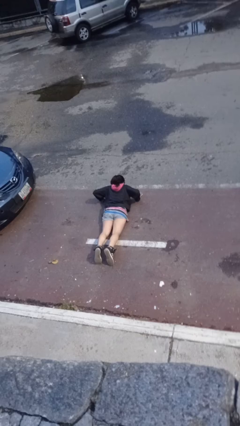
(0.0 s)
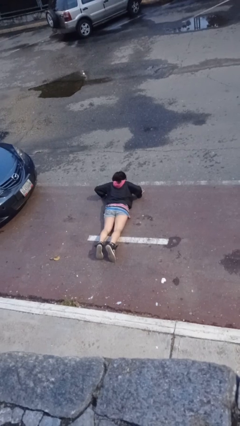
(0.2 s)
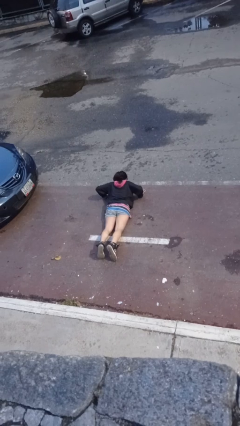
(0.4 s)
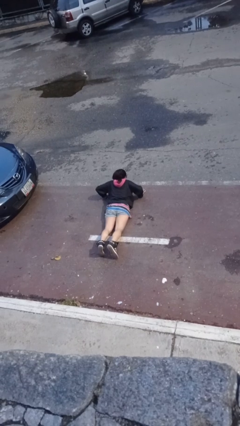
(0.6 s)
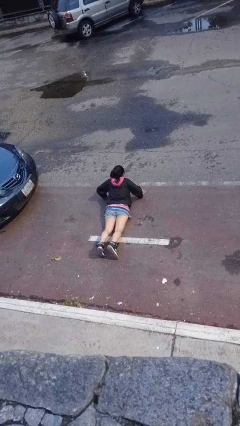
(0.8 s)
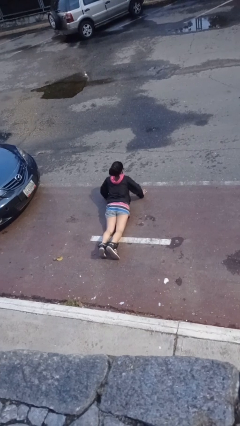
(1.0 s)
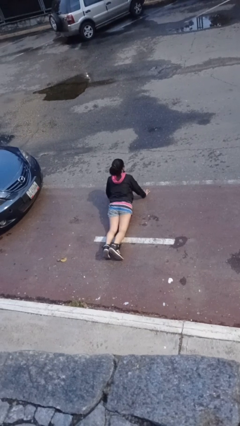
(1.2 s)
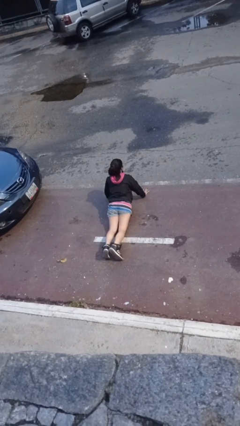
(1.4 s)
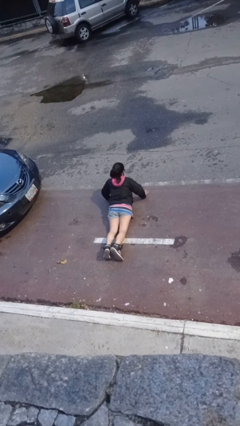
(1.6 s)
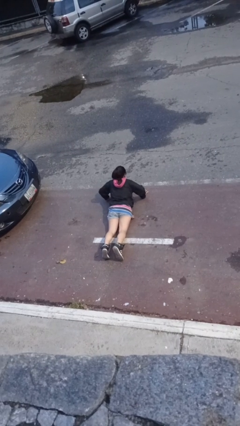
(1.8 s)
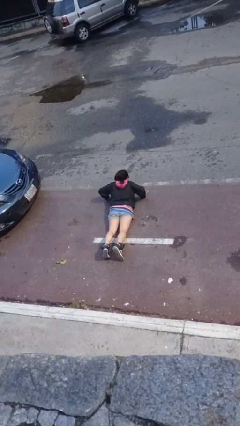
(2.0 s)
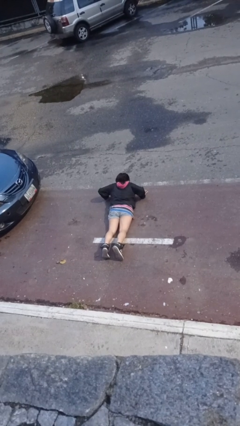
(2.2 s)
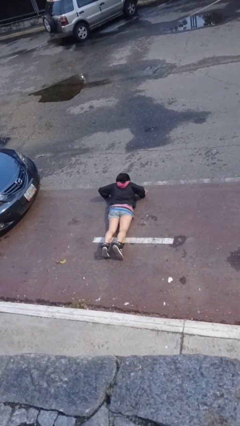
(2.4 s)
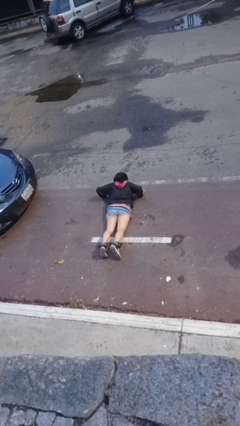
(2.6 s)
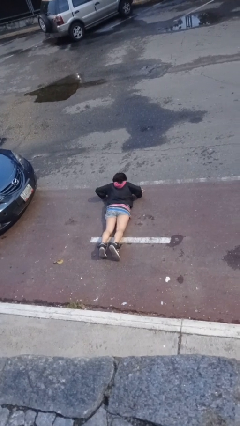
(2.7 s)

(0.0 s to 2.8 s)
person exercises with pushup

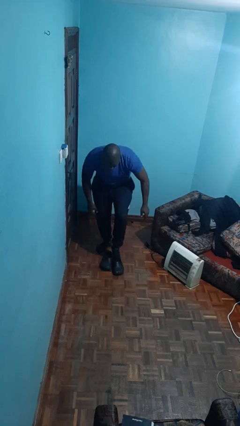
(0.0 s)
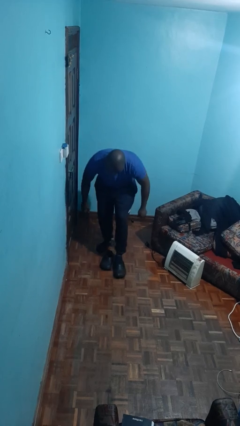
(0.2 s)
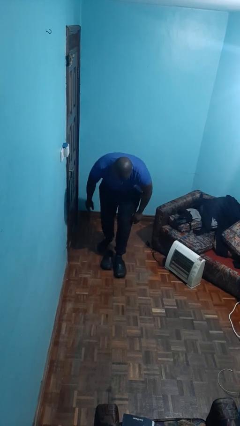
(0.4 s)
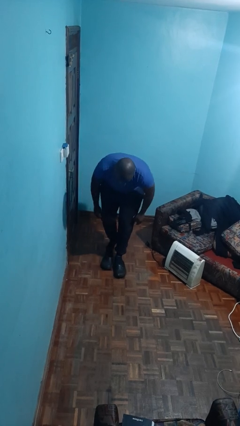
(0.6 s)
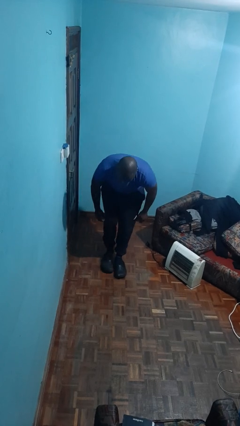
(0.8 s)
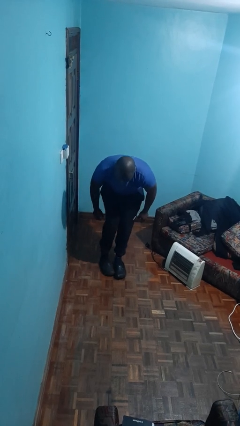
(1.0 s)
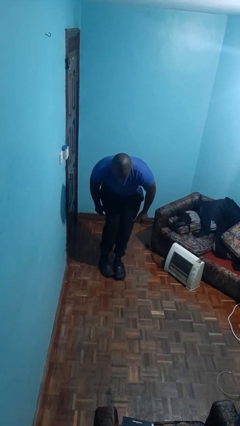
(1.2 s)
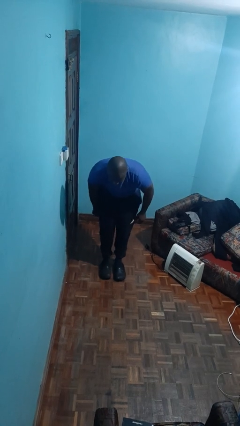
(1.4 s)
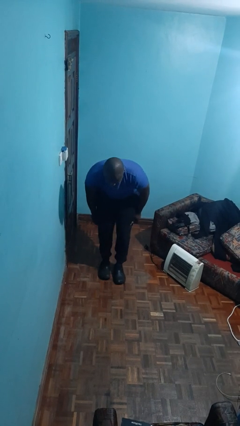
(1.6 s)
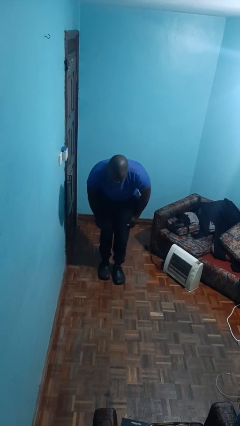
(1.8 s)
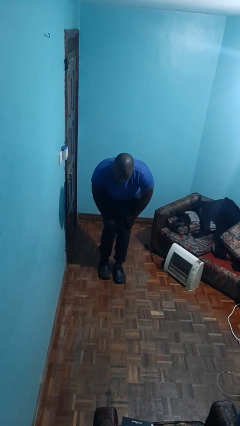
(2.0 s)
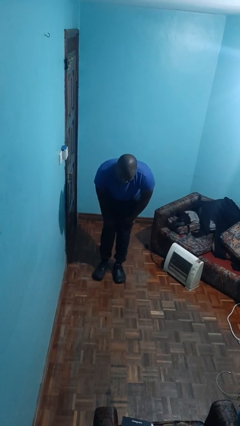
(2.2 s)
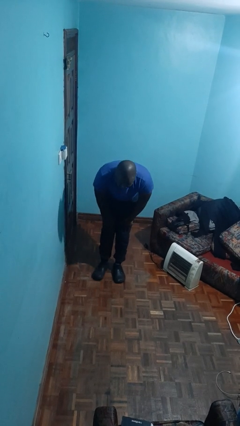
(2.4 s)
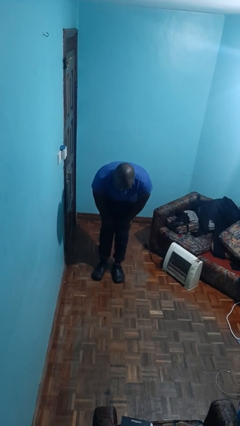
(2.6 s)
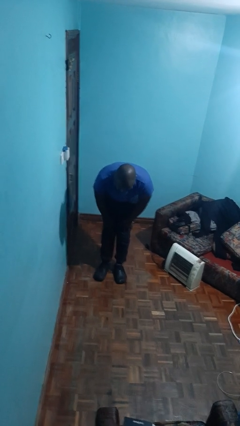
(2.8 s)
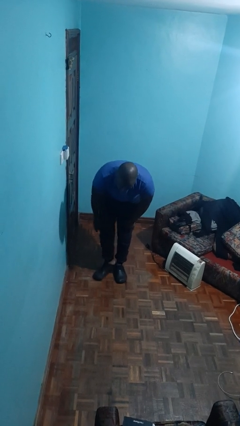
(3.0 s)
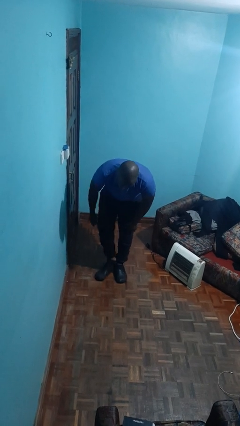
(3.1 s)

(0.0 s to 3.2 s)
person puts on shoes

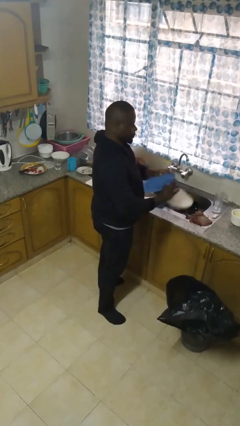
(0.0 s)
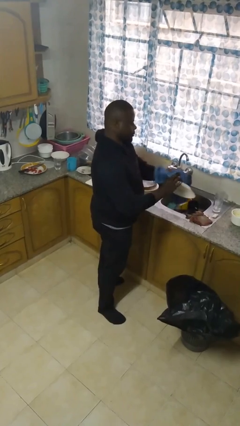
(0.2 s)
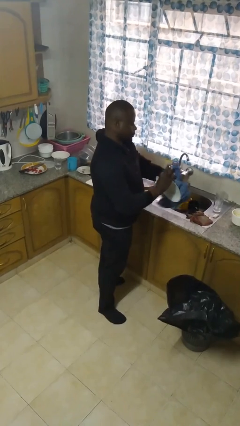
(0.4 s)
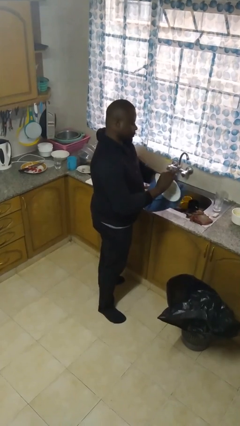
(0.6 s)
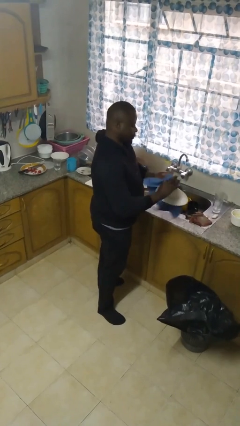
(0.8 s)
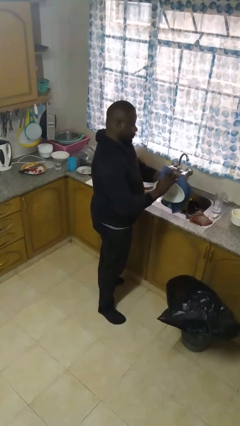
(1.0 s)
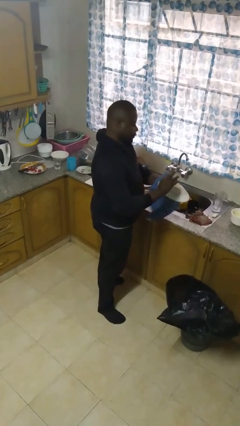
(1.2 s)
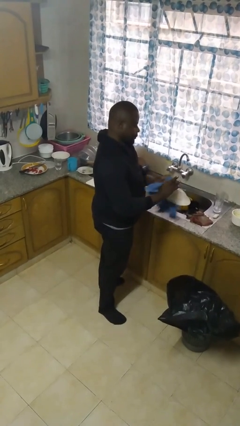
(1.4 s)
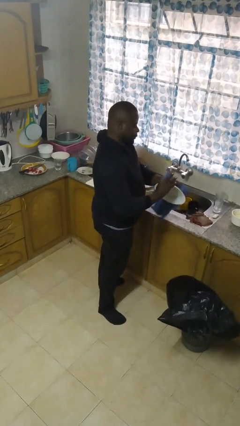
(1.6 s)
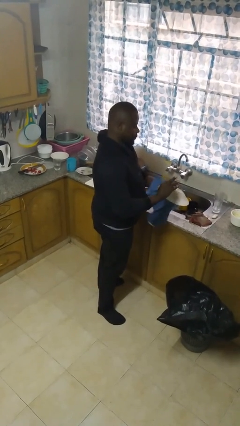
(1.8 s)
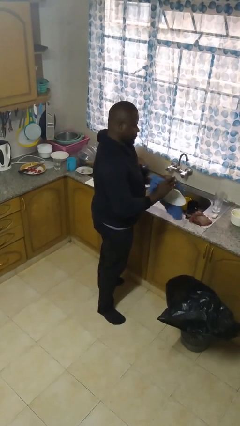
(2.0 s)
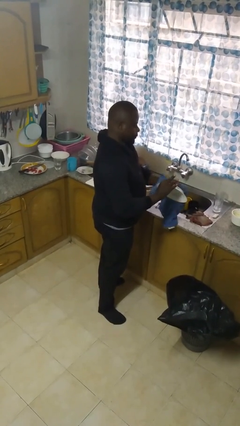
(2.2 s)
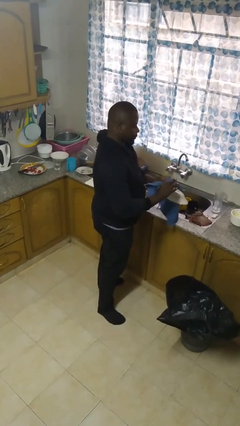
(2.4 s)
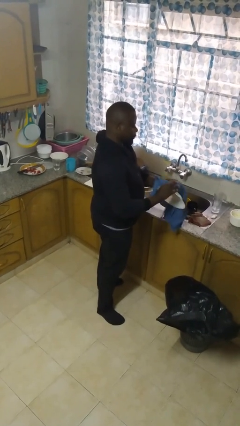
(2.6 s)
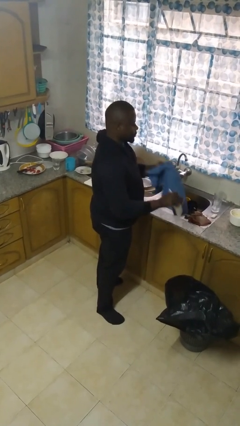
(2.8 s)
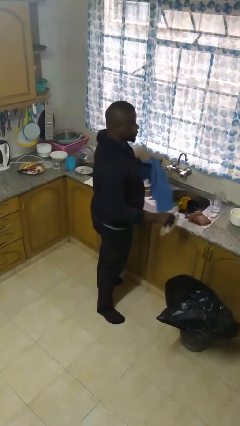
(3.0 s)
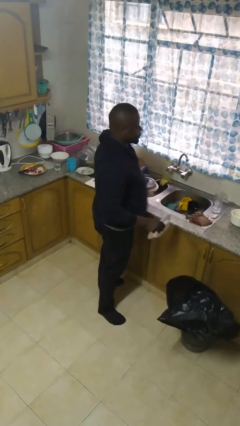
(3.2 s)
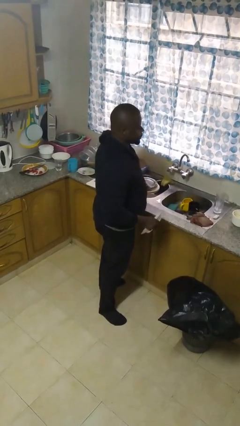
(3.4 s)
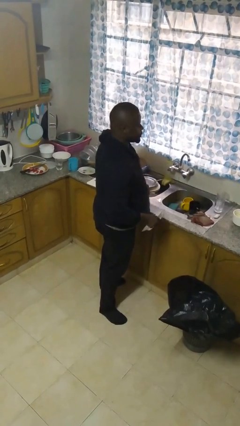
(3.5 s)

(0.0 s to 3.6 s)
person dries dish

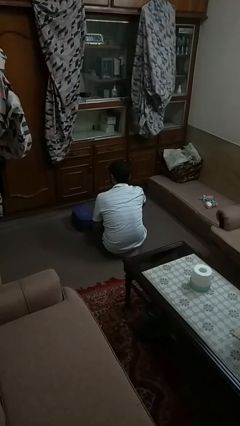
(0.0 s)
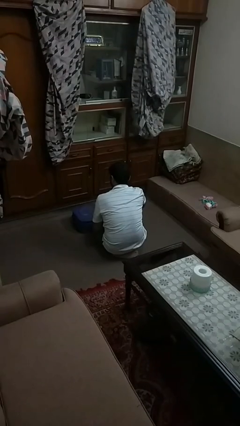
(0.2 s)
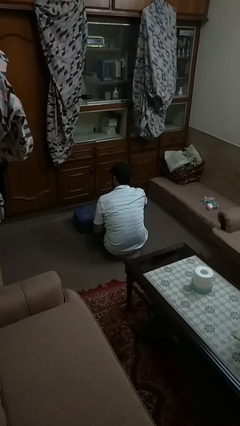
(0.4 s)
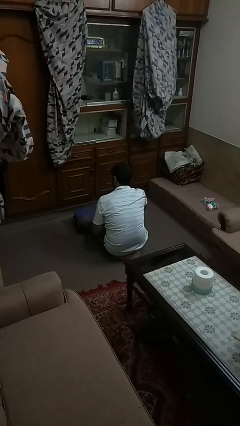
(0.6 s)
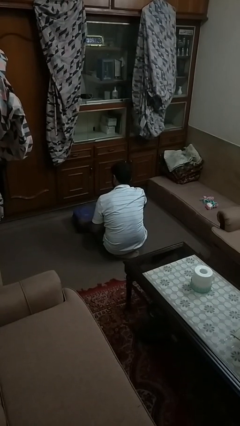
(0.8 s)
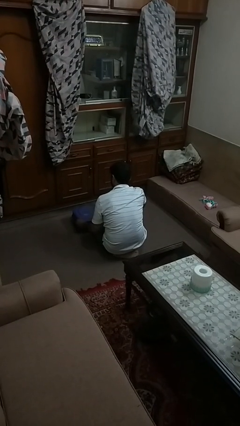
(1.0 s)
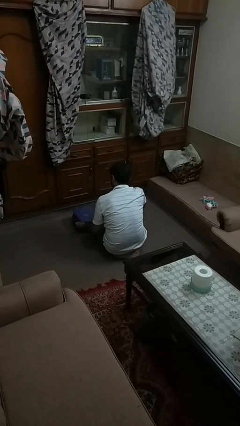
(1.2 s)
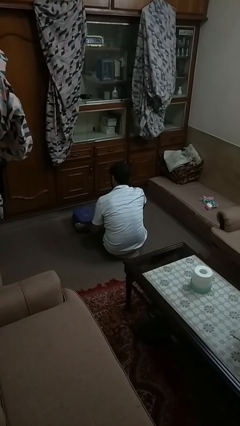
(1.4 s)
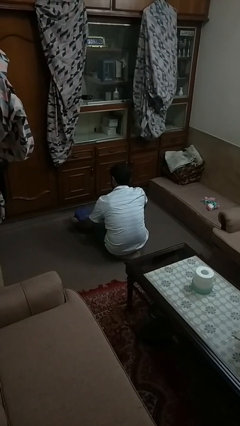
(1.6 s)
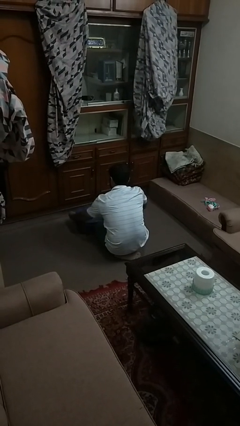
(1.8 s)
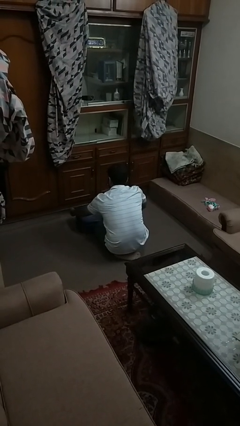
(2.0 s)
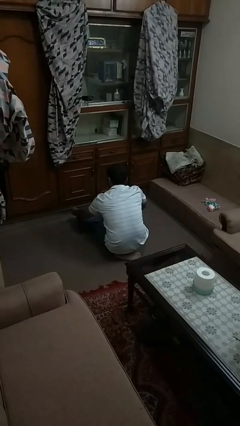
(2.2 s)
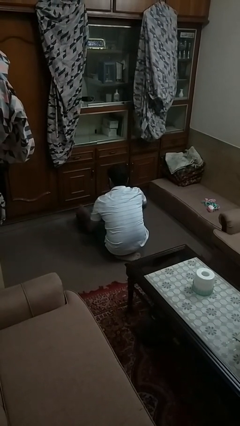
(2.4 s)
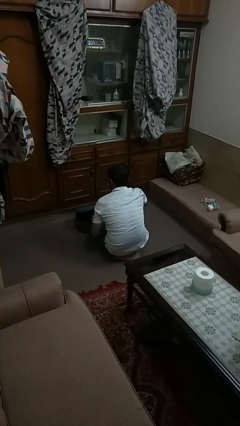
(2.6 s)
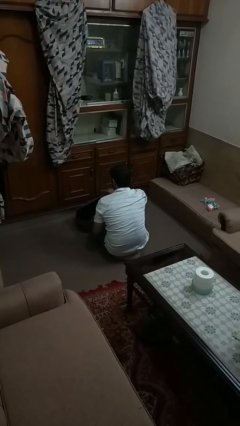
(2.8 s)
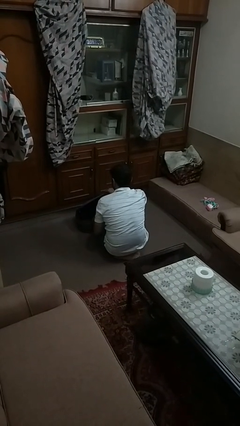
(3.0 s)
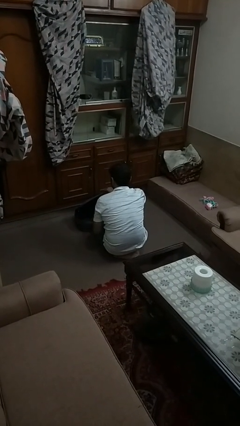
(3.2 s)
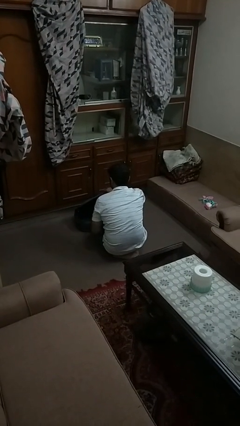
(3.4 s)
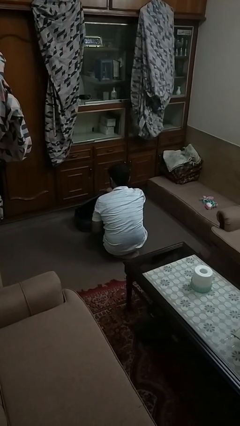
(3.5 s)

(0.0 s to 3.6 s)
person opens suitcase

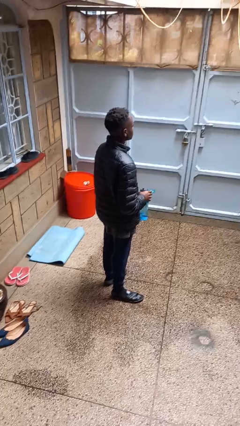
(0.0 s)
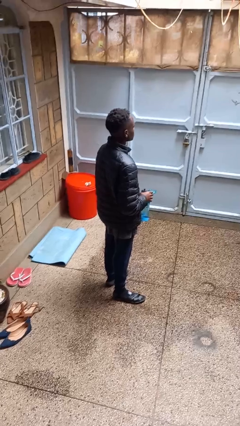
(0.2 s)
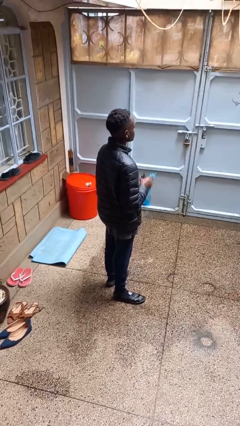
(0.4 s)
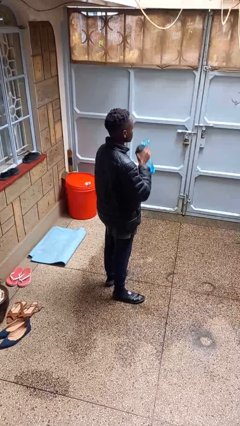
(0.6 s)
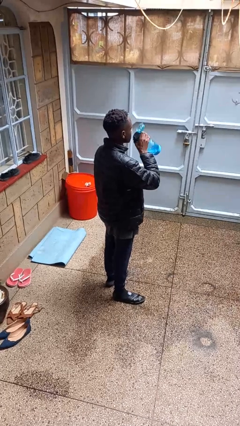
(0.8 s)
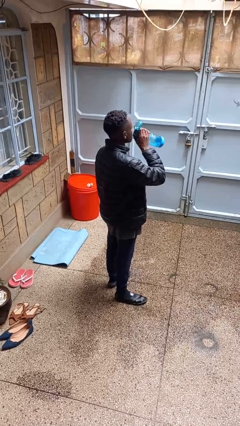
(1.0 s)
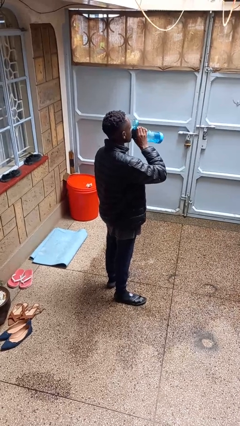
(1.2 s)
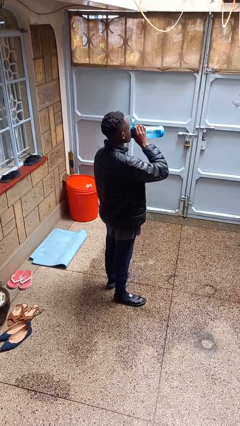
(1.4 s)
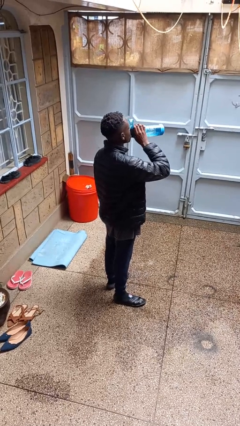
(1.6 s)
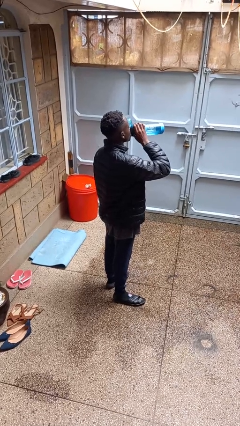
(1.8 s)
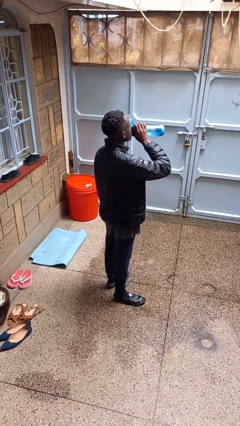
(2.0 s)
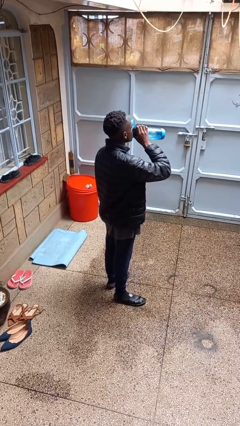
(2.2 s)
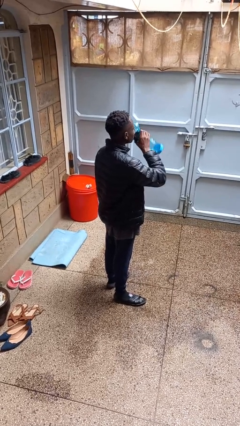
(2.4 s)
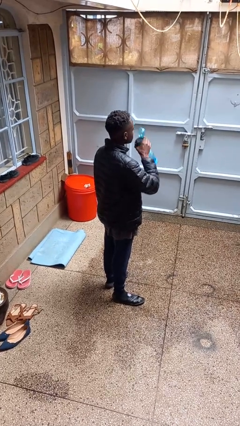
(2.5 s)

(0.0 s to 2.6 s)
person drinks from bottle

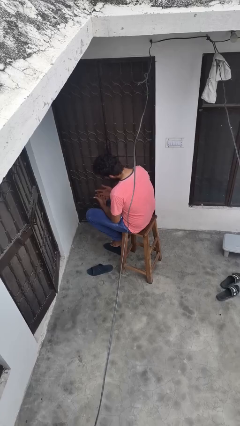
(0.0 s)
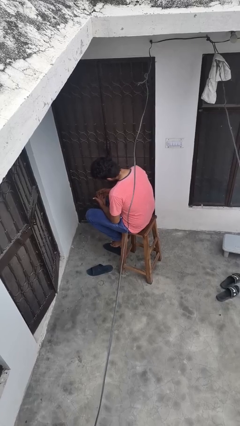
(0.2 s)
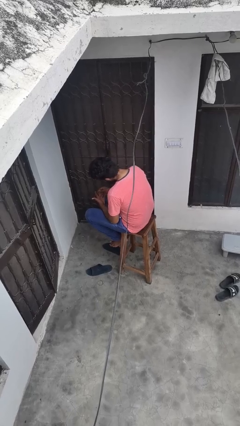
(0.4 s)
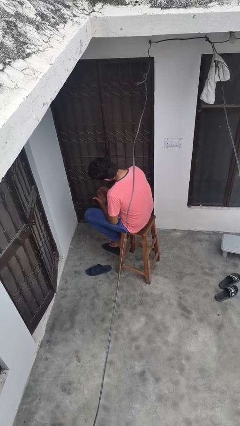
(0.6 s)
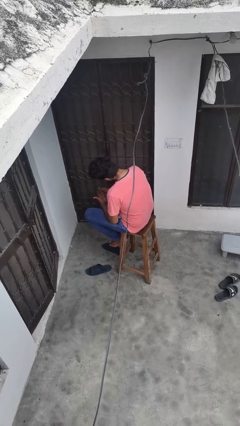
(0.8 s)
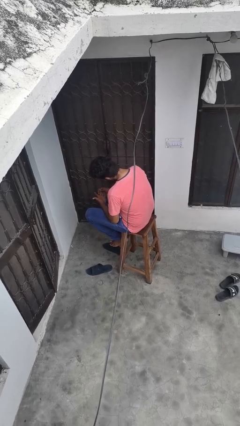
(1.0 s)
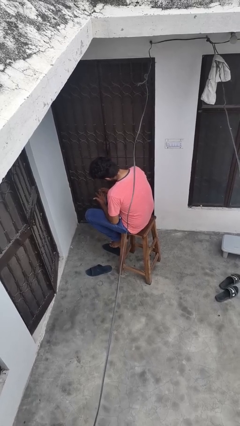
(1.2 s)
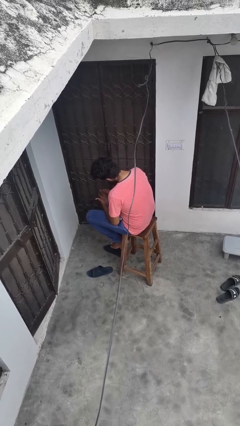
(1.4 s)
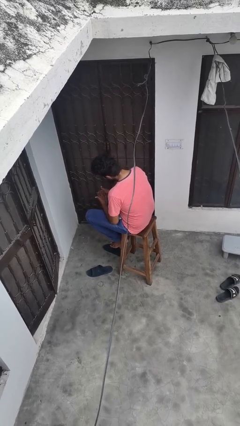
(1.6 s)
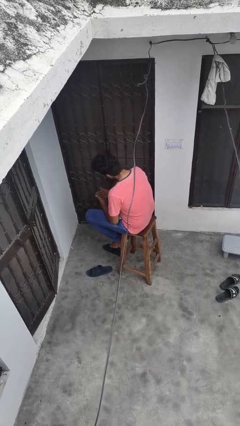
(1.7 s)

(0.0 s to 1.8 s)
person looks at hands in lap
